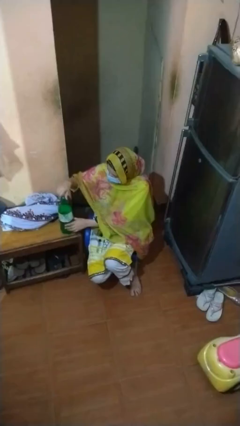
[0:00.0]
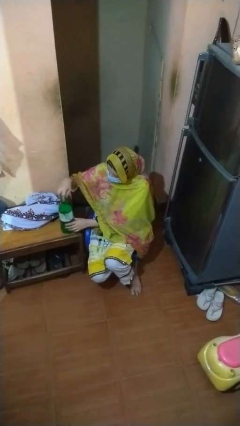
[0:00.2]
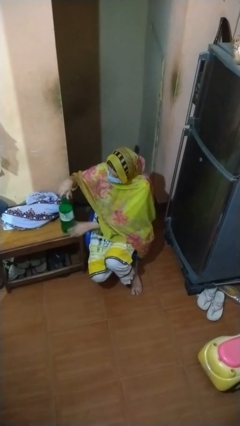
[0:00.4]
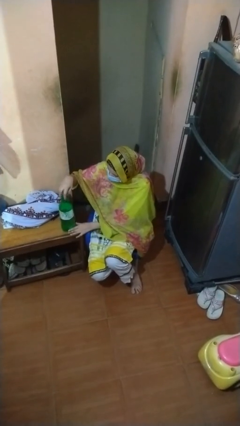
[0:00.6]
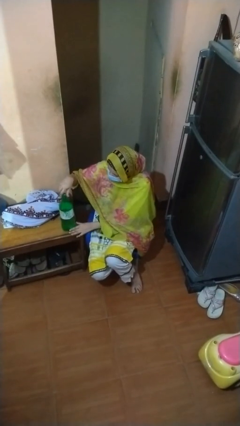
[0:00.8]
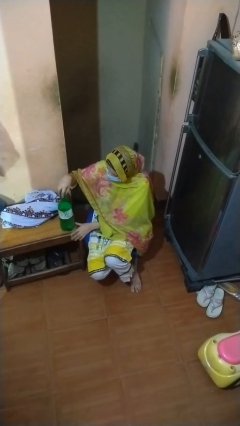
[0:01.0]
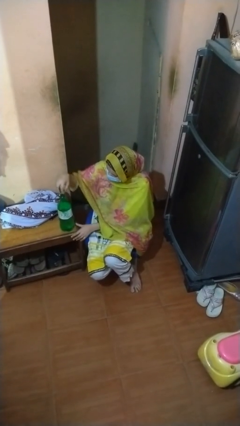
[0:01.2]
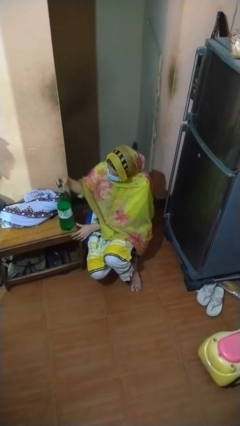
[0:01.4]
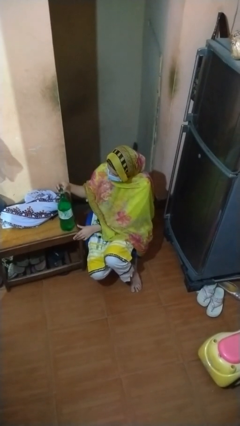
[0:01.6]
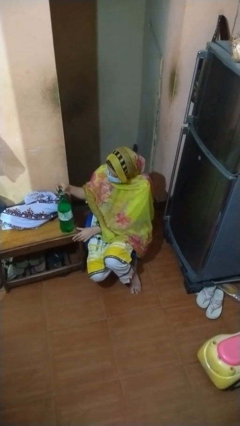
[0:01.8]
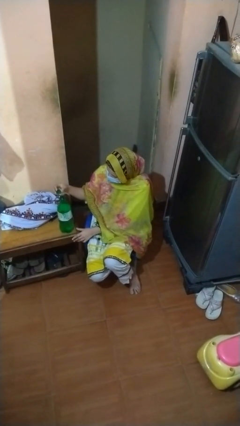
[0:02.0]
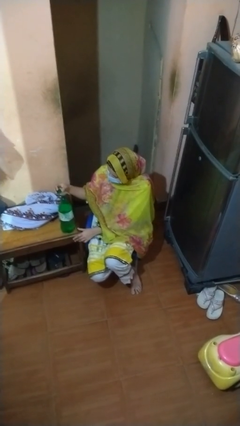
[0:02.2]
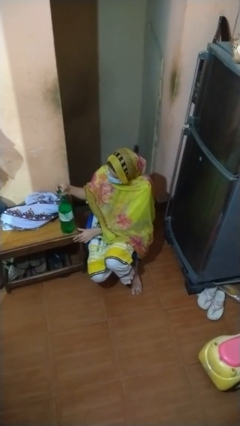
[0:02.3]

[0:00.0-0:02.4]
person unscrews lid from bottle

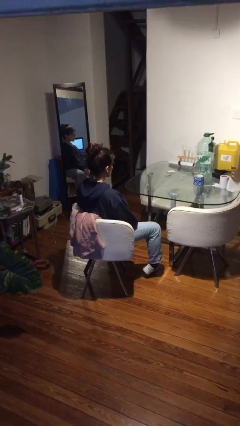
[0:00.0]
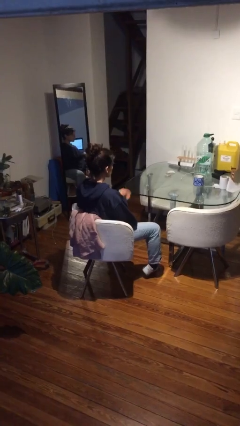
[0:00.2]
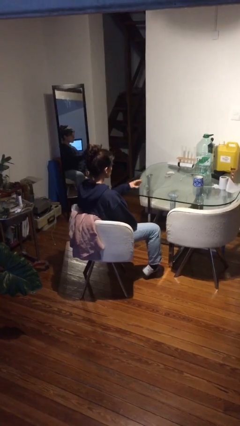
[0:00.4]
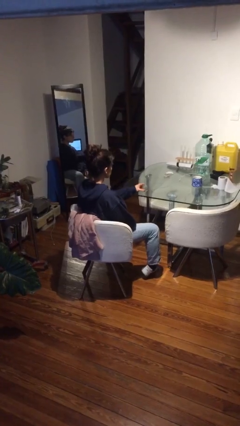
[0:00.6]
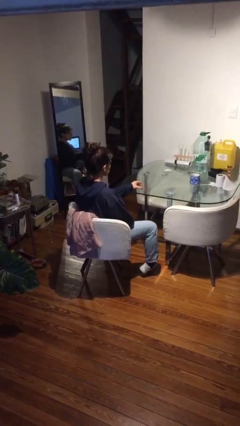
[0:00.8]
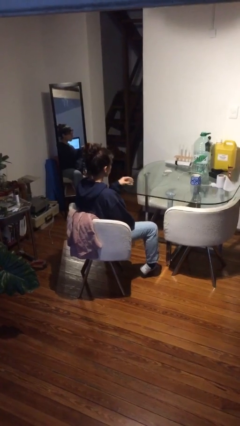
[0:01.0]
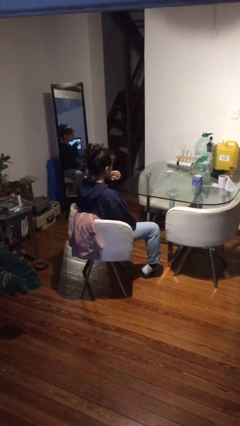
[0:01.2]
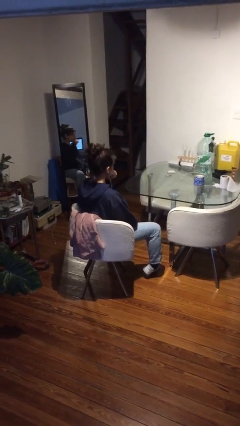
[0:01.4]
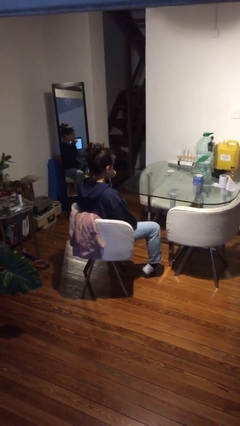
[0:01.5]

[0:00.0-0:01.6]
person picks up object from table

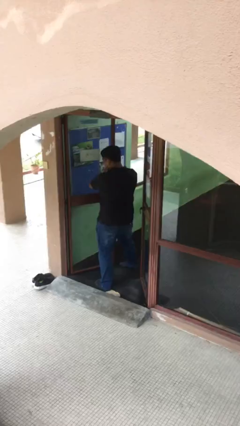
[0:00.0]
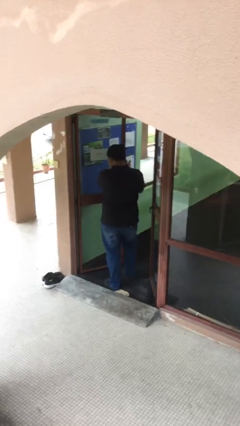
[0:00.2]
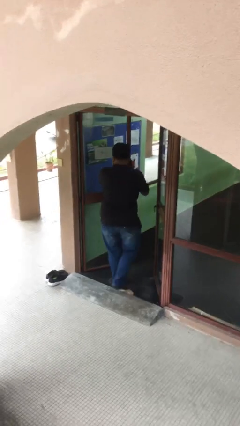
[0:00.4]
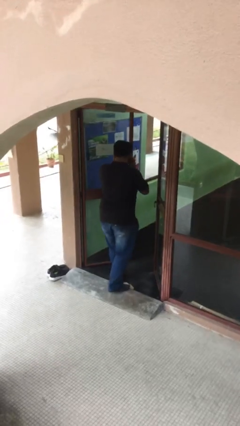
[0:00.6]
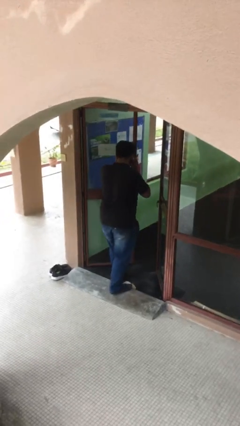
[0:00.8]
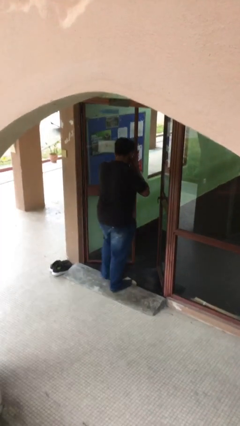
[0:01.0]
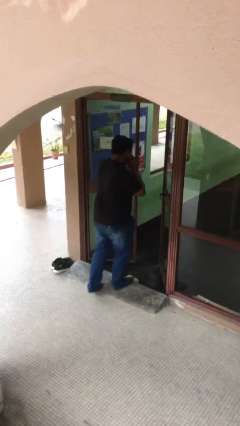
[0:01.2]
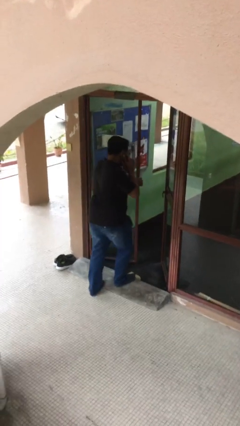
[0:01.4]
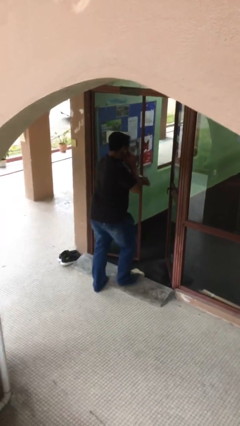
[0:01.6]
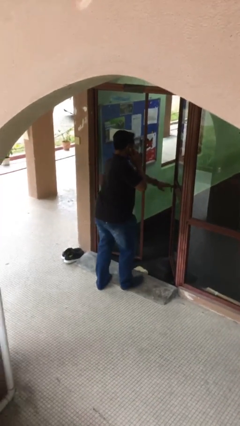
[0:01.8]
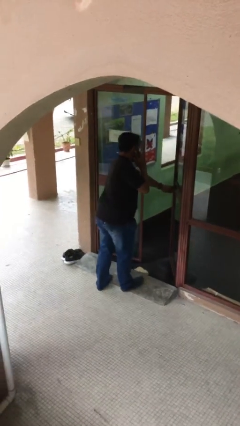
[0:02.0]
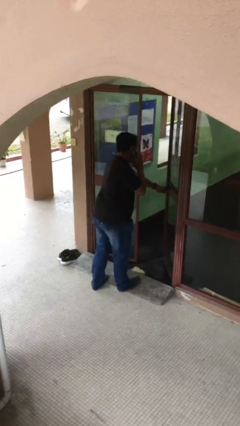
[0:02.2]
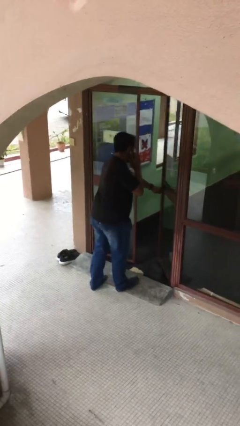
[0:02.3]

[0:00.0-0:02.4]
person enters scene through structure

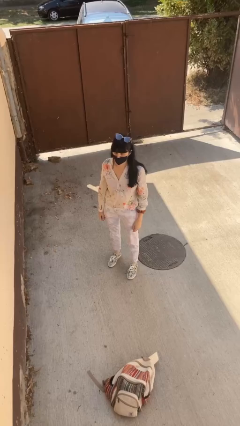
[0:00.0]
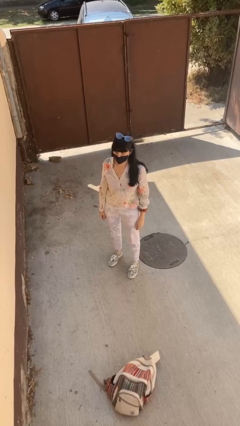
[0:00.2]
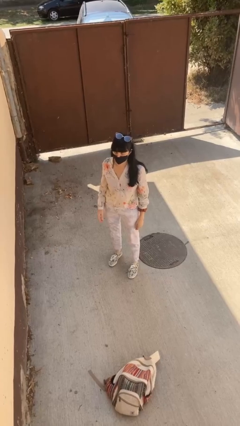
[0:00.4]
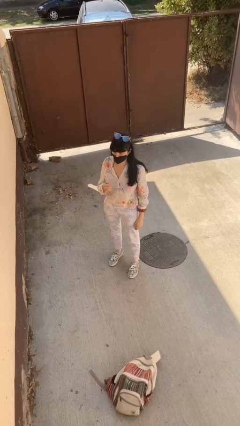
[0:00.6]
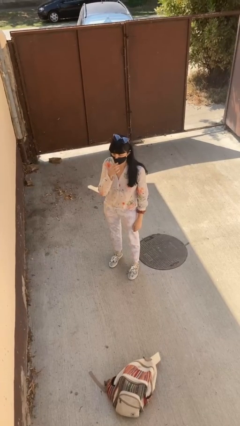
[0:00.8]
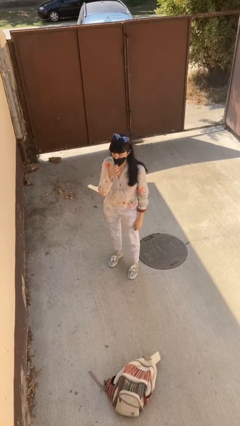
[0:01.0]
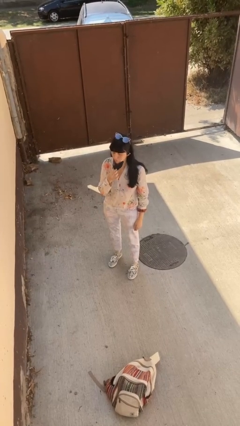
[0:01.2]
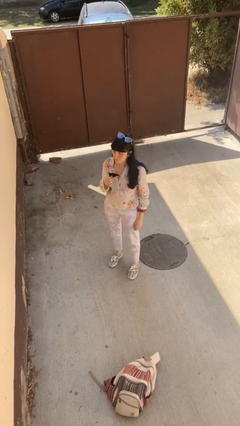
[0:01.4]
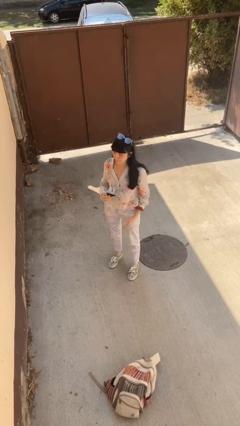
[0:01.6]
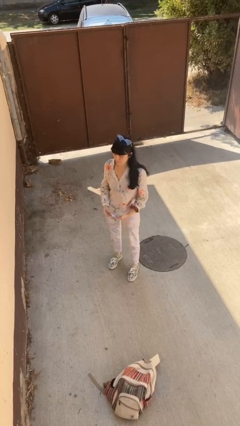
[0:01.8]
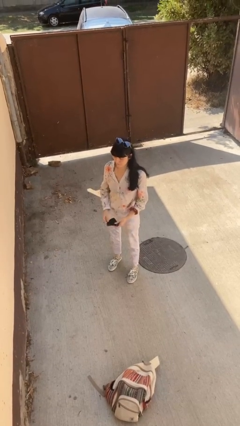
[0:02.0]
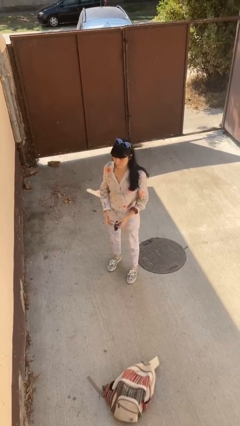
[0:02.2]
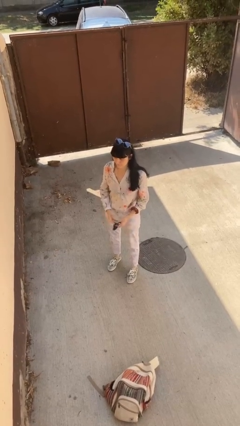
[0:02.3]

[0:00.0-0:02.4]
person takes off facemask

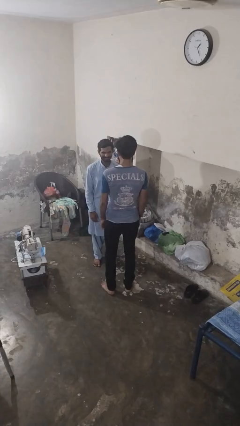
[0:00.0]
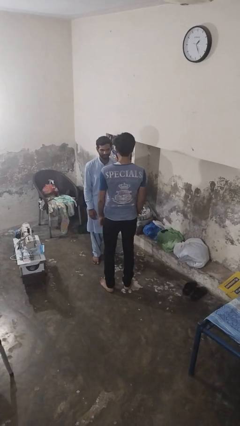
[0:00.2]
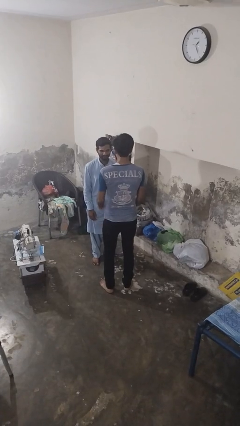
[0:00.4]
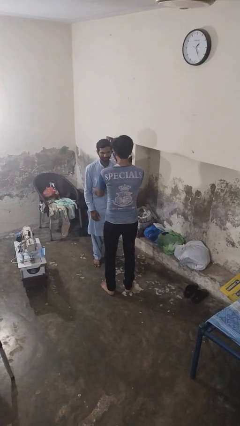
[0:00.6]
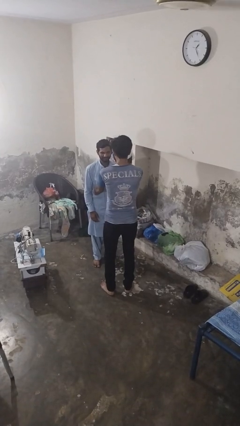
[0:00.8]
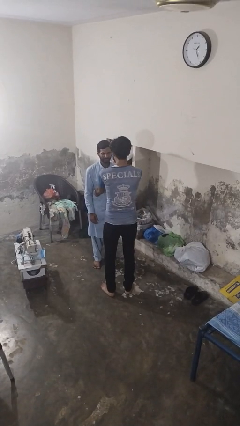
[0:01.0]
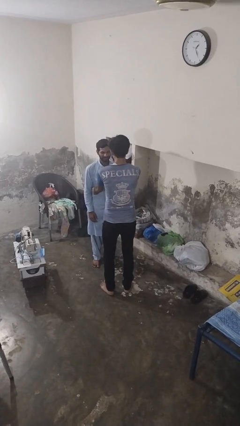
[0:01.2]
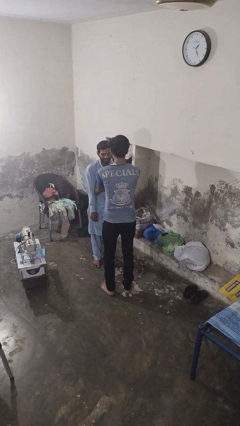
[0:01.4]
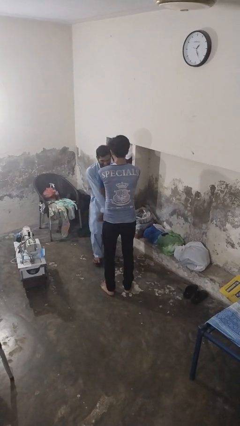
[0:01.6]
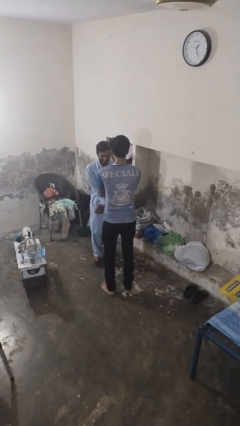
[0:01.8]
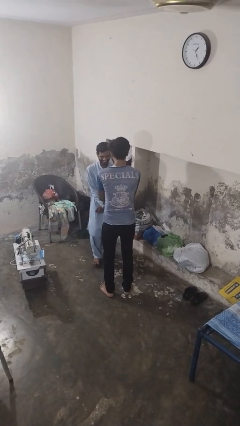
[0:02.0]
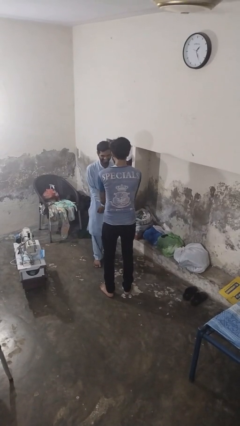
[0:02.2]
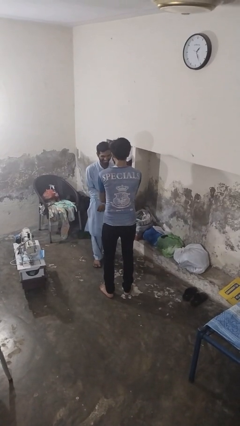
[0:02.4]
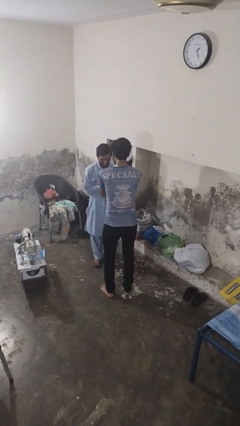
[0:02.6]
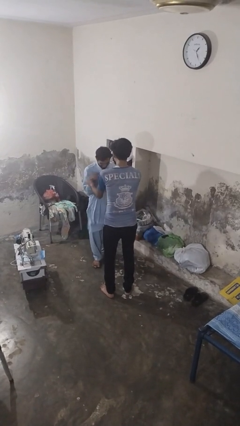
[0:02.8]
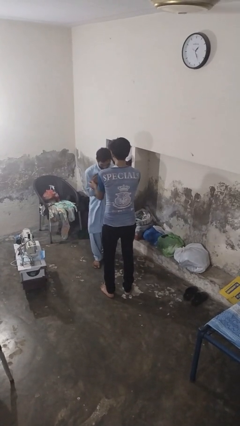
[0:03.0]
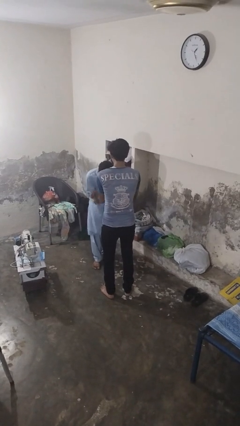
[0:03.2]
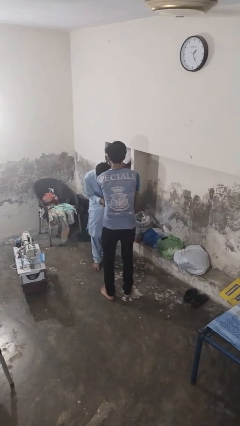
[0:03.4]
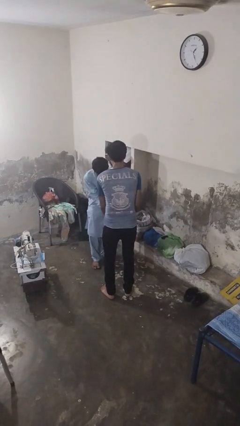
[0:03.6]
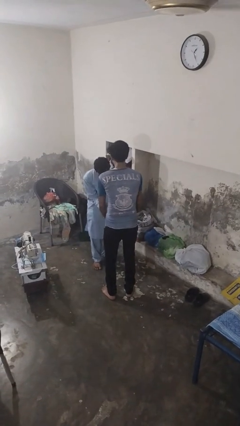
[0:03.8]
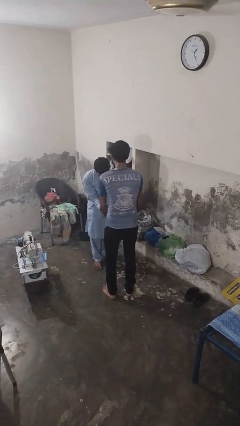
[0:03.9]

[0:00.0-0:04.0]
person tickles person

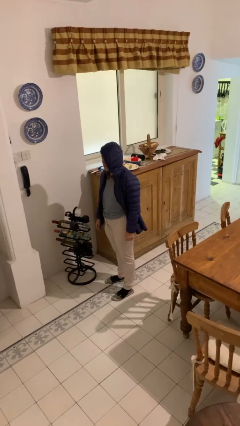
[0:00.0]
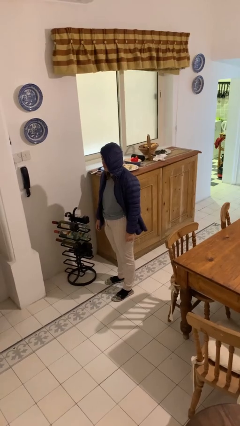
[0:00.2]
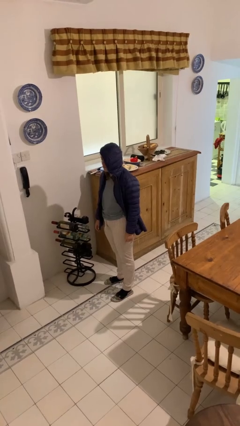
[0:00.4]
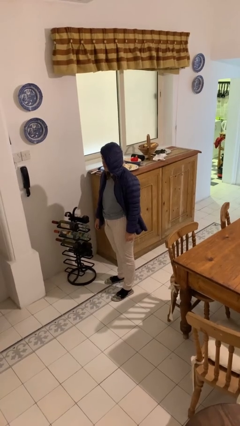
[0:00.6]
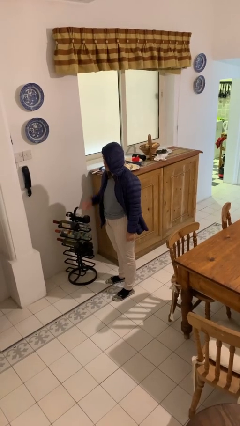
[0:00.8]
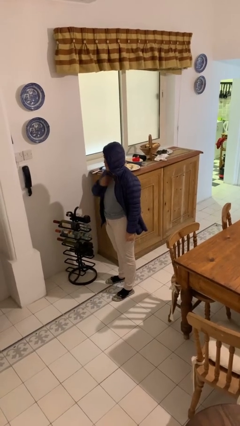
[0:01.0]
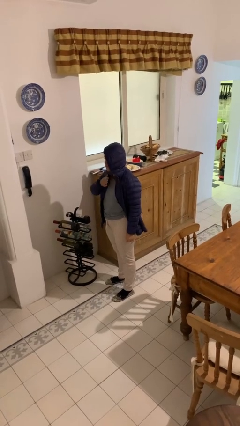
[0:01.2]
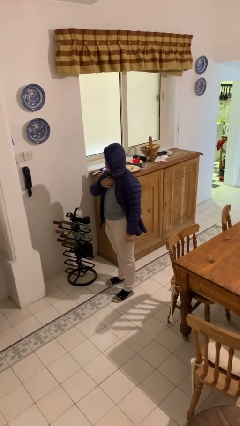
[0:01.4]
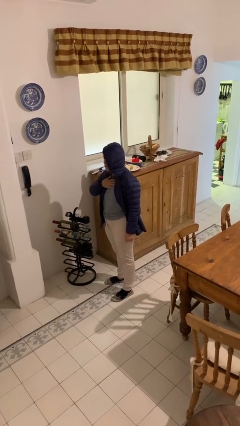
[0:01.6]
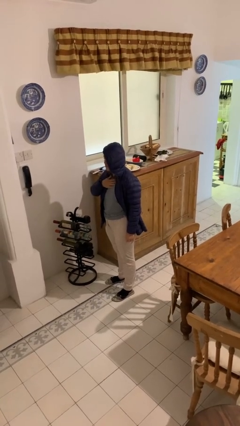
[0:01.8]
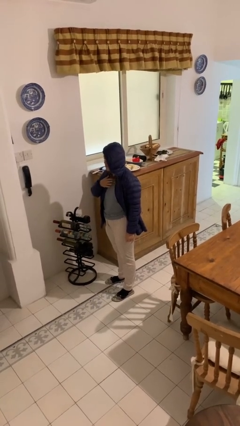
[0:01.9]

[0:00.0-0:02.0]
person drums on chest

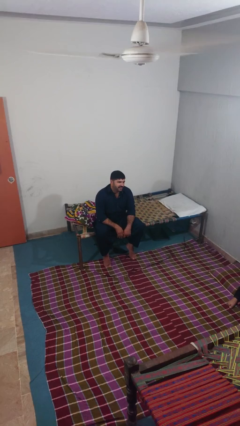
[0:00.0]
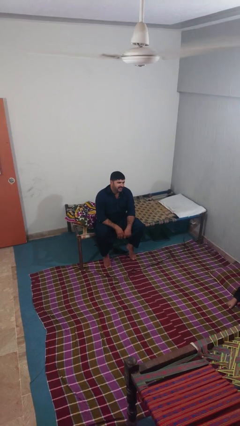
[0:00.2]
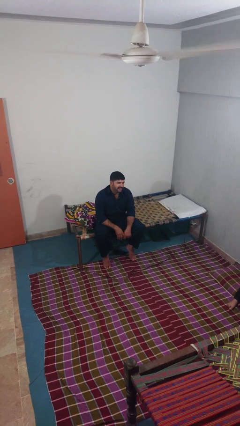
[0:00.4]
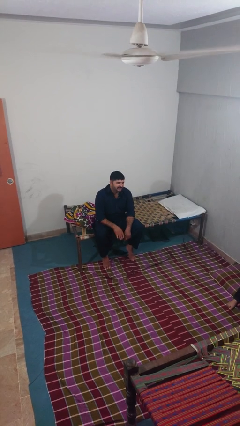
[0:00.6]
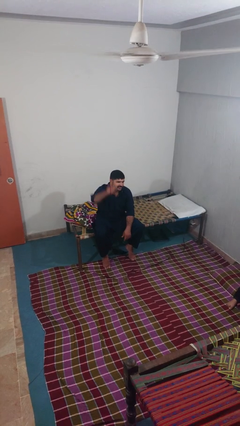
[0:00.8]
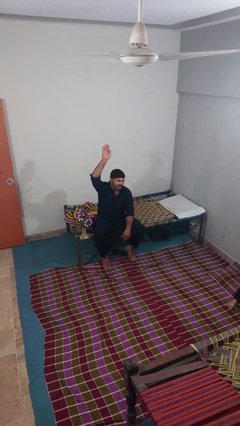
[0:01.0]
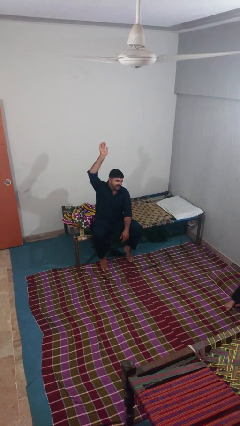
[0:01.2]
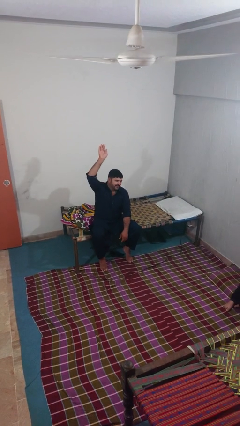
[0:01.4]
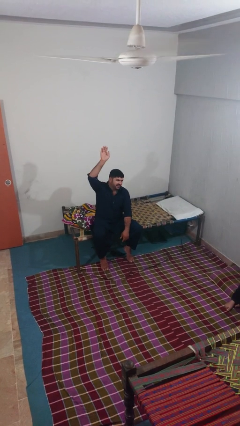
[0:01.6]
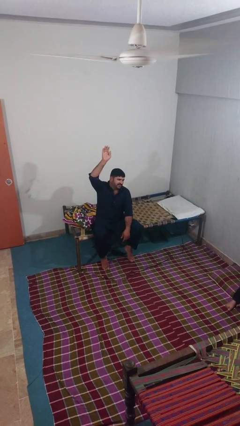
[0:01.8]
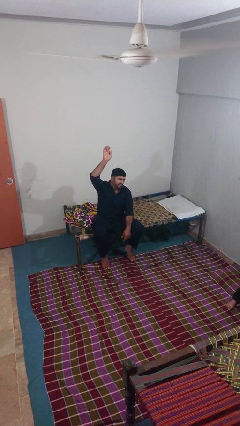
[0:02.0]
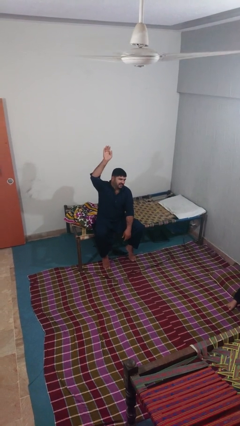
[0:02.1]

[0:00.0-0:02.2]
person gestures raise hand

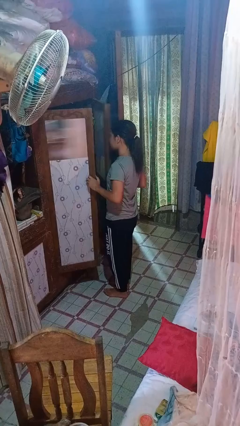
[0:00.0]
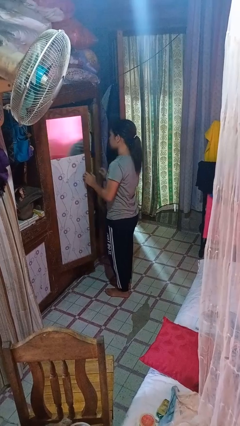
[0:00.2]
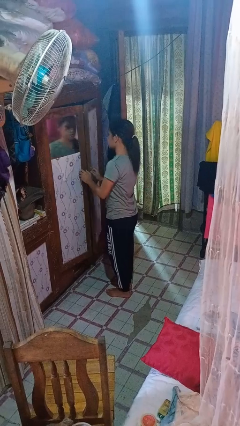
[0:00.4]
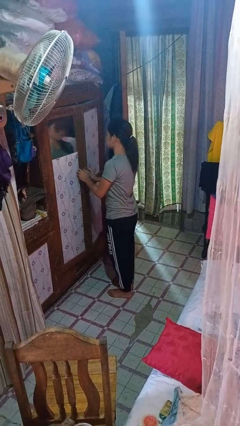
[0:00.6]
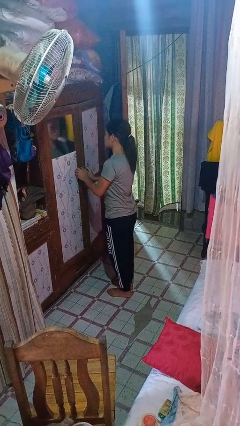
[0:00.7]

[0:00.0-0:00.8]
person closes closet door
